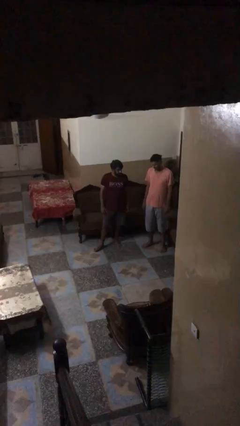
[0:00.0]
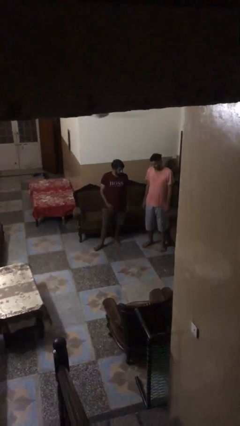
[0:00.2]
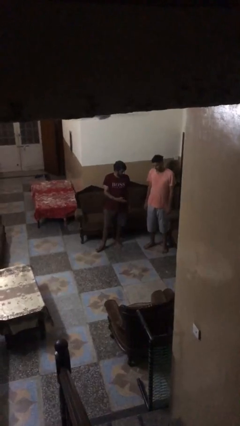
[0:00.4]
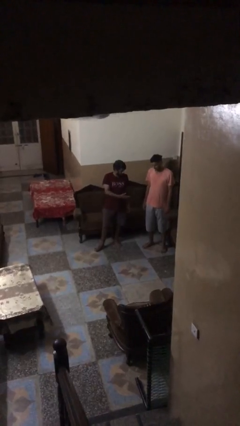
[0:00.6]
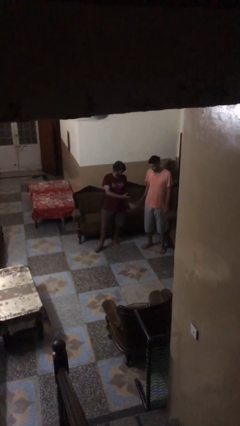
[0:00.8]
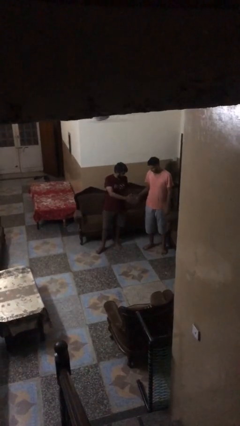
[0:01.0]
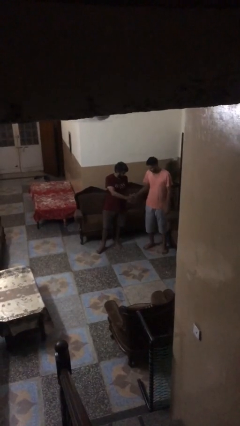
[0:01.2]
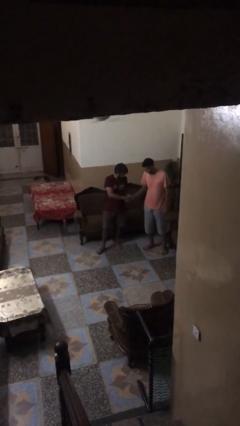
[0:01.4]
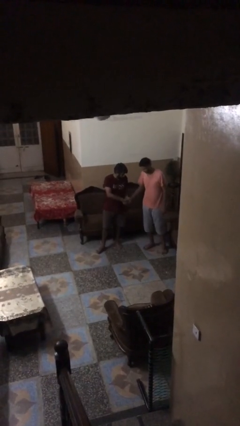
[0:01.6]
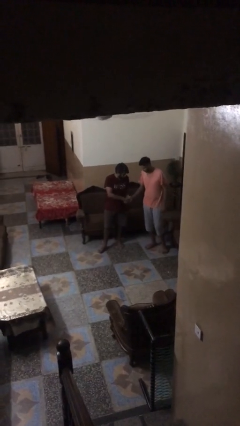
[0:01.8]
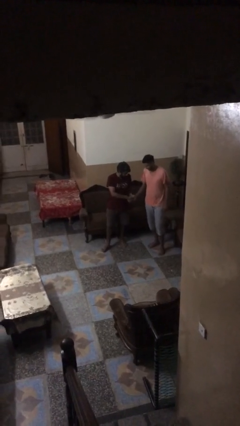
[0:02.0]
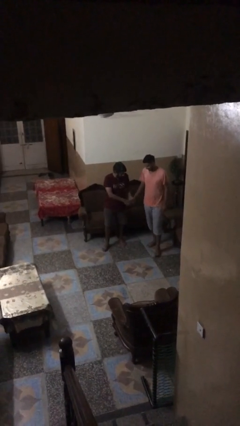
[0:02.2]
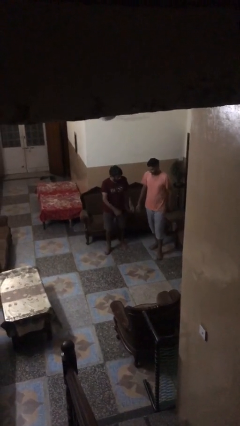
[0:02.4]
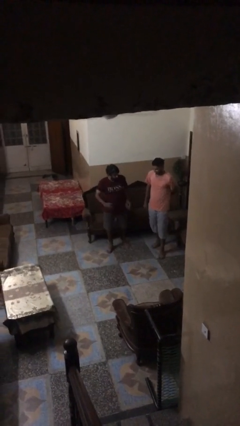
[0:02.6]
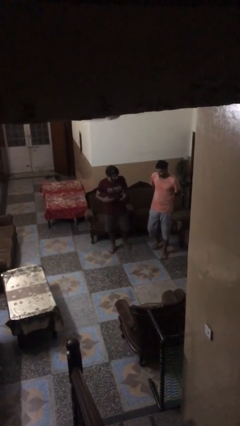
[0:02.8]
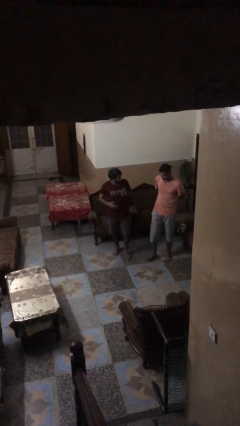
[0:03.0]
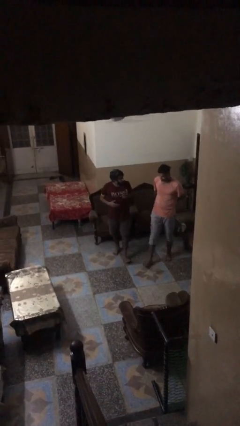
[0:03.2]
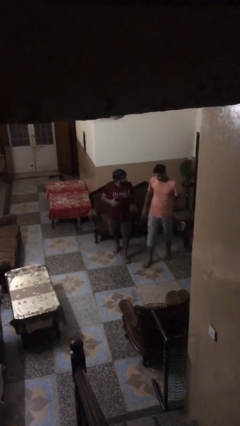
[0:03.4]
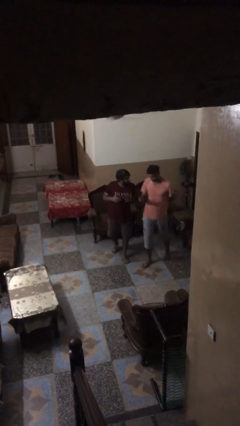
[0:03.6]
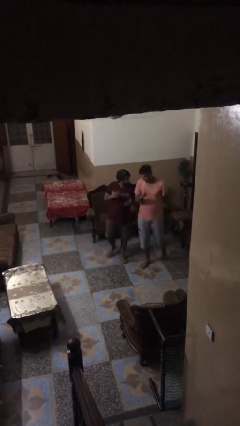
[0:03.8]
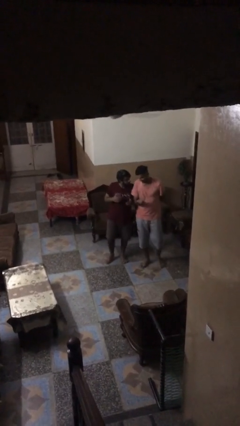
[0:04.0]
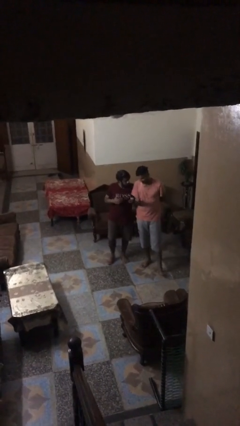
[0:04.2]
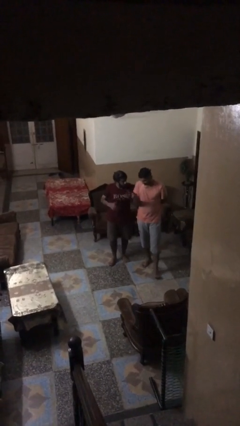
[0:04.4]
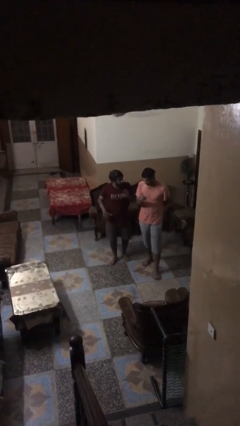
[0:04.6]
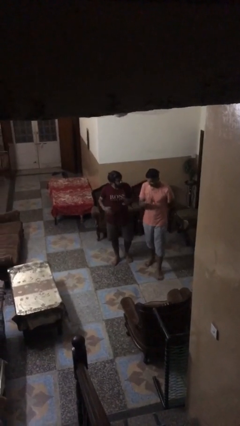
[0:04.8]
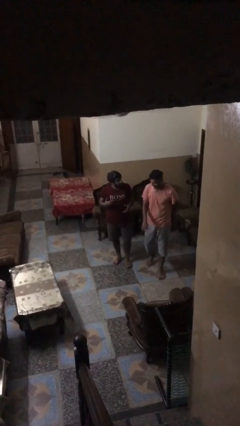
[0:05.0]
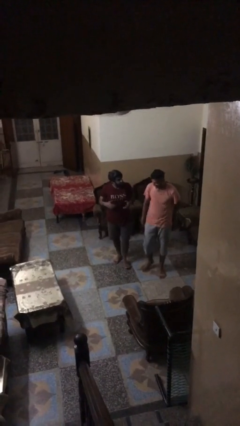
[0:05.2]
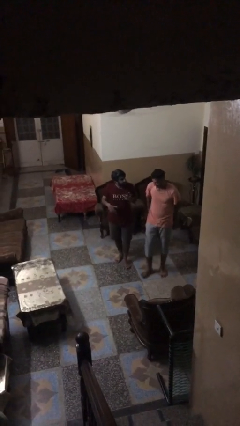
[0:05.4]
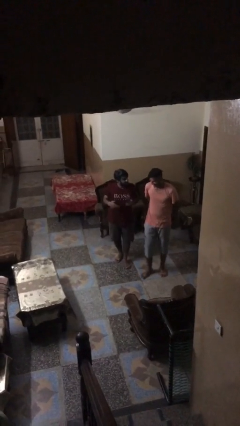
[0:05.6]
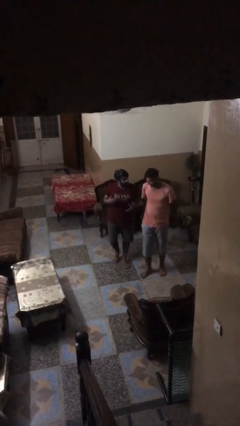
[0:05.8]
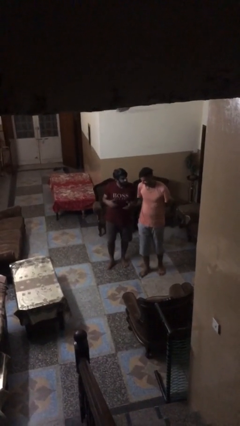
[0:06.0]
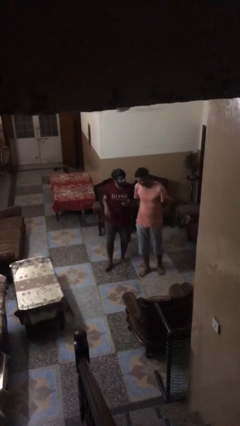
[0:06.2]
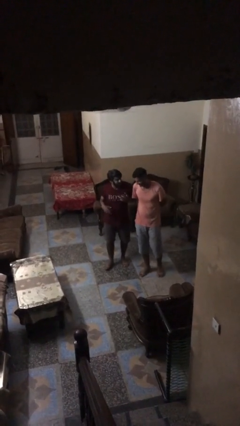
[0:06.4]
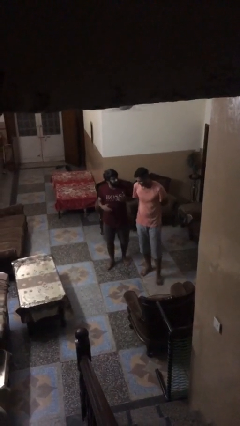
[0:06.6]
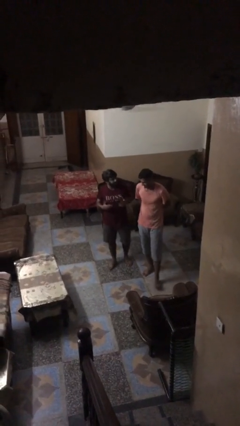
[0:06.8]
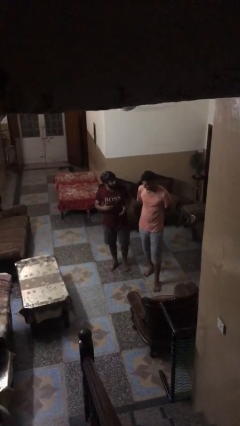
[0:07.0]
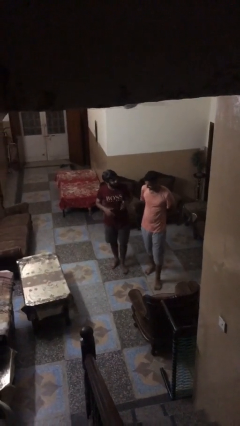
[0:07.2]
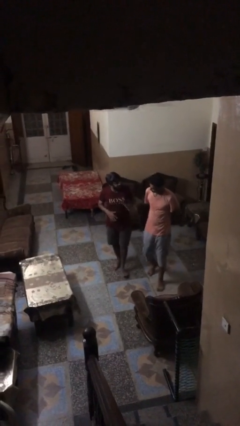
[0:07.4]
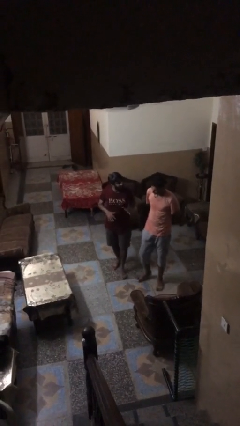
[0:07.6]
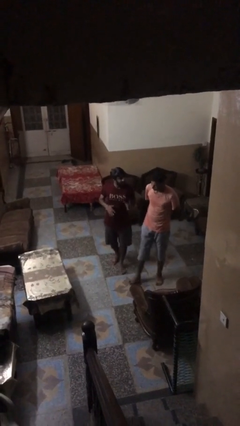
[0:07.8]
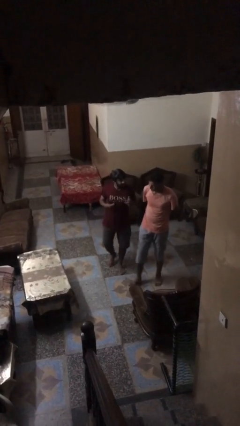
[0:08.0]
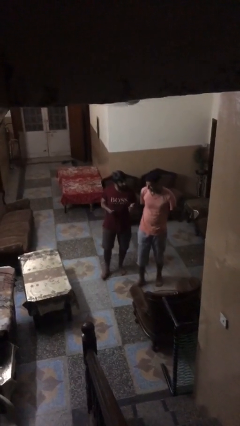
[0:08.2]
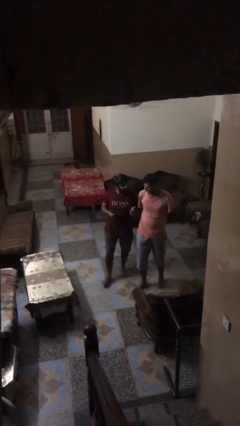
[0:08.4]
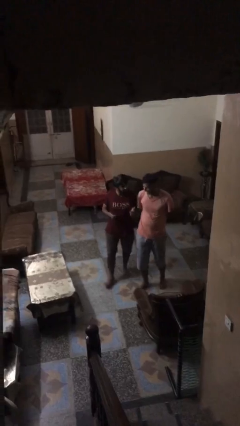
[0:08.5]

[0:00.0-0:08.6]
person shakes hand

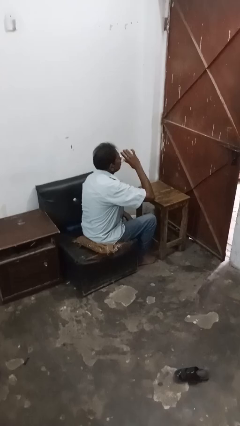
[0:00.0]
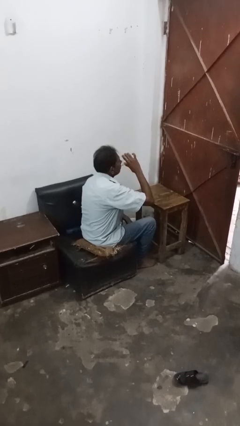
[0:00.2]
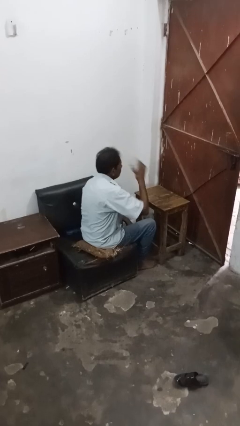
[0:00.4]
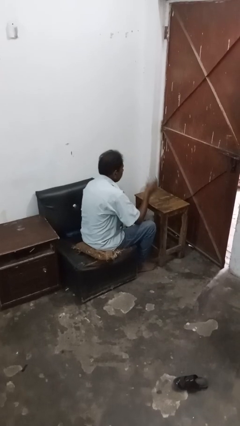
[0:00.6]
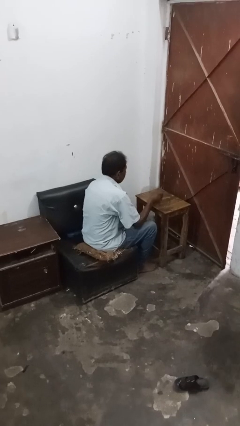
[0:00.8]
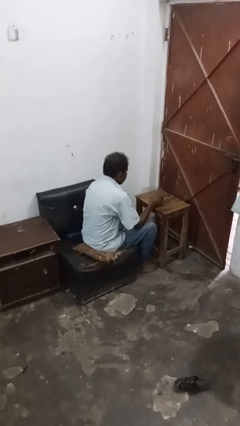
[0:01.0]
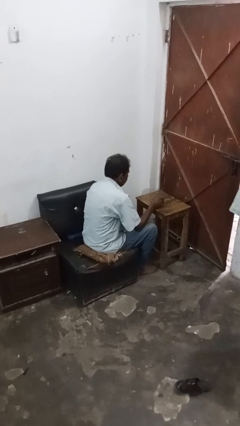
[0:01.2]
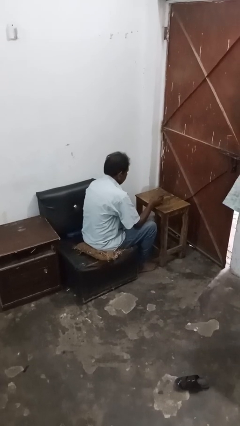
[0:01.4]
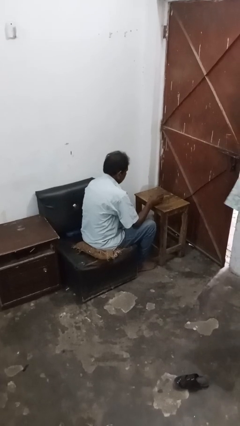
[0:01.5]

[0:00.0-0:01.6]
person puts down object on table

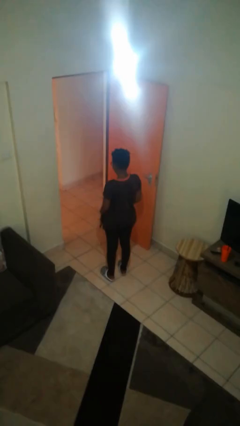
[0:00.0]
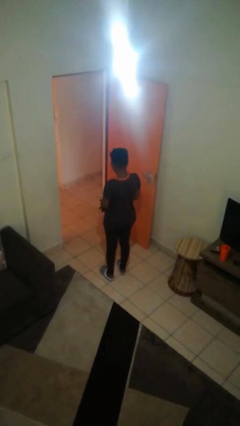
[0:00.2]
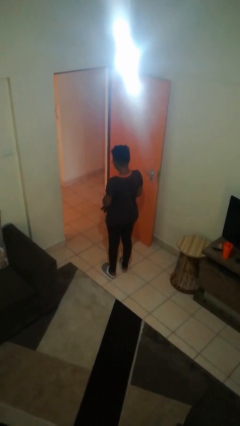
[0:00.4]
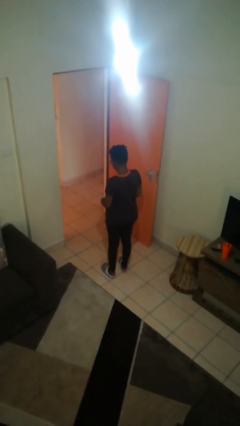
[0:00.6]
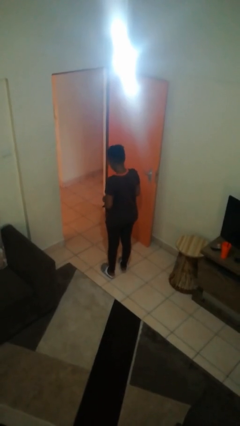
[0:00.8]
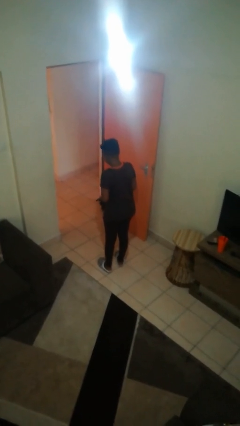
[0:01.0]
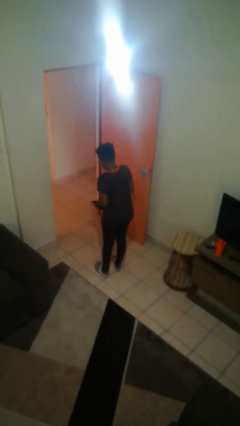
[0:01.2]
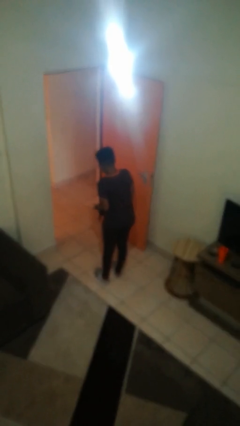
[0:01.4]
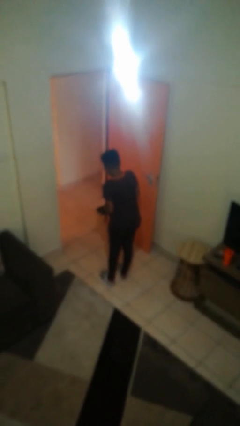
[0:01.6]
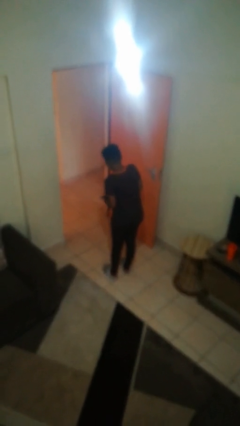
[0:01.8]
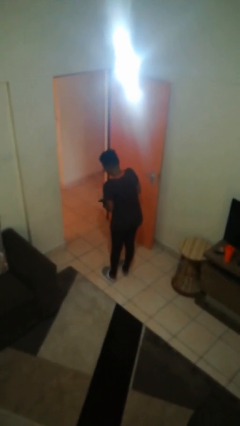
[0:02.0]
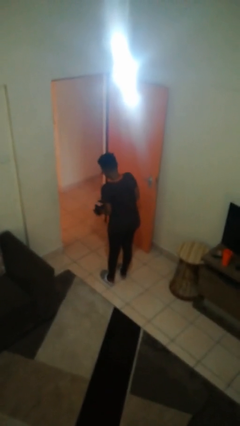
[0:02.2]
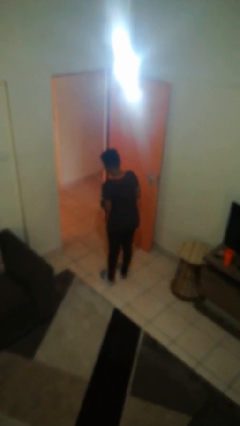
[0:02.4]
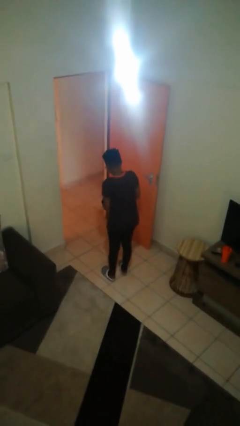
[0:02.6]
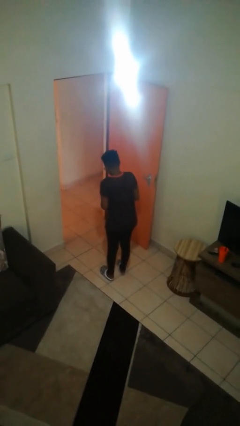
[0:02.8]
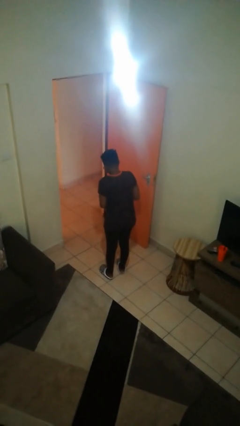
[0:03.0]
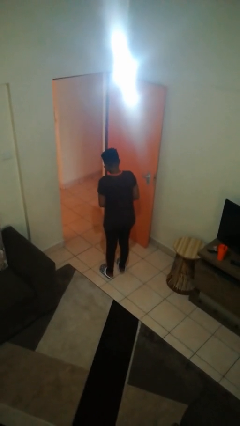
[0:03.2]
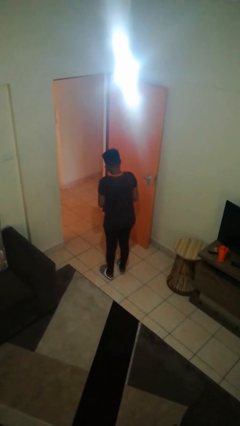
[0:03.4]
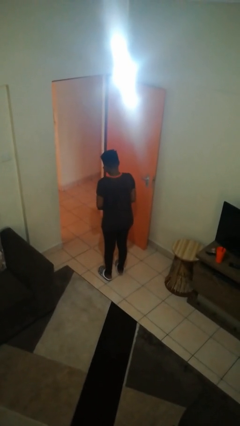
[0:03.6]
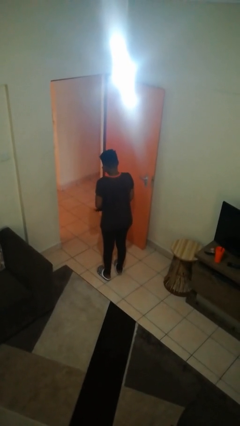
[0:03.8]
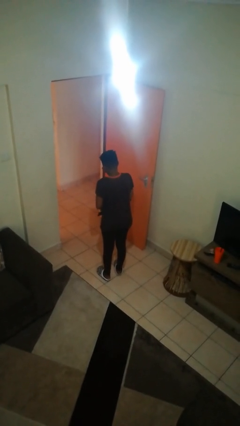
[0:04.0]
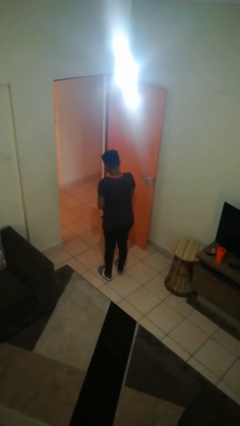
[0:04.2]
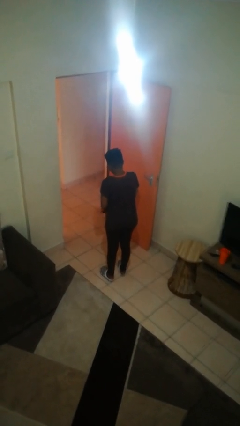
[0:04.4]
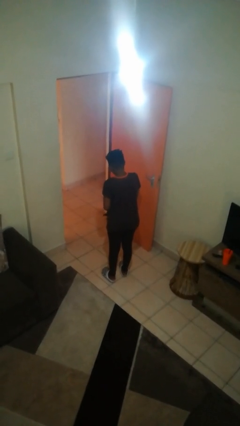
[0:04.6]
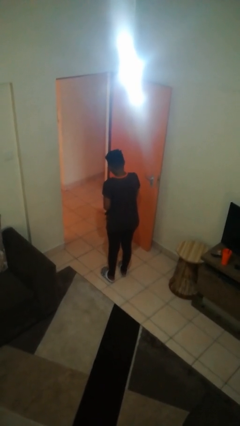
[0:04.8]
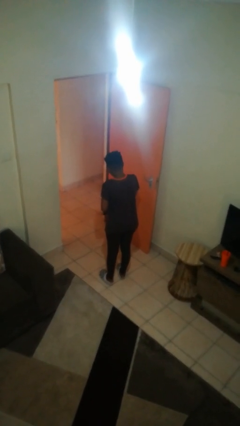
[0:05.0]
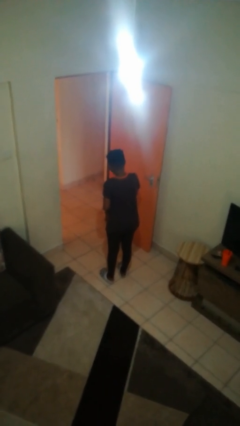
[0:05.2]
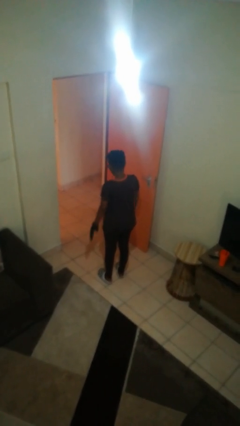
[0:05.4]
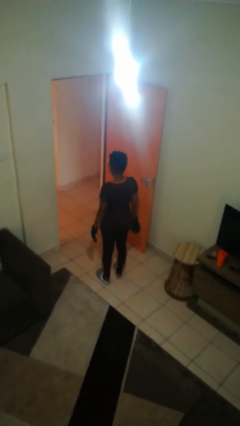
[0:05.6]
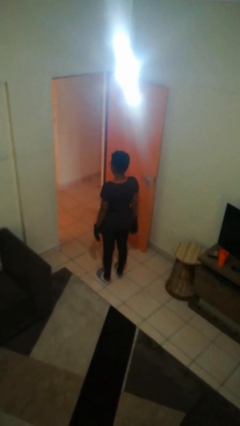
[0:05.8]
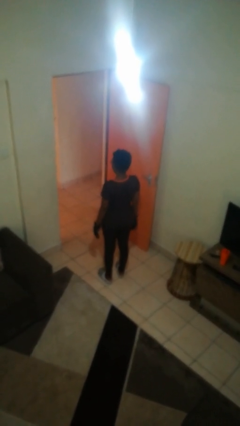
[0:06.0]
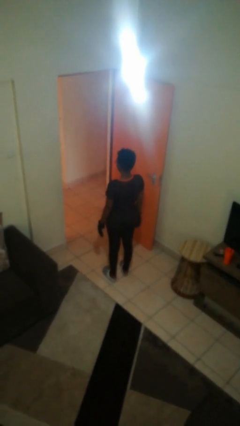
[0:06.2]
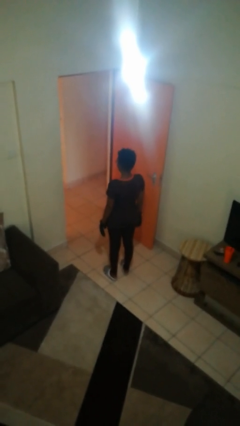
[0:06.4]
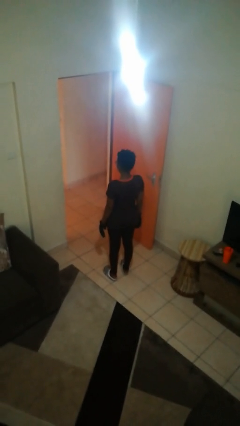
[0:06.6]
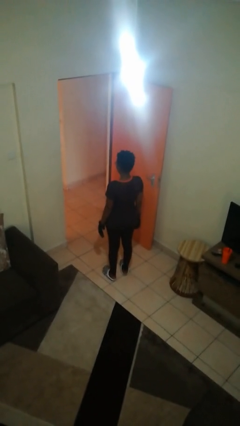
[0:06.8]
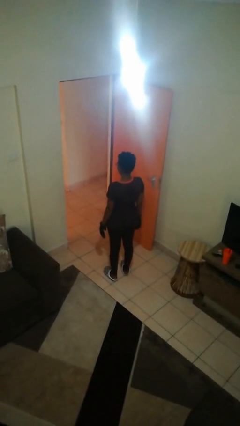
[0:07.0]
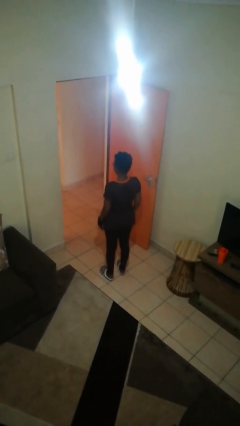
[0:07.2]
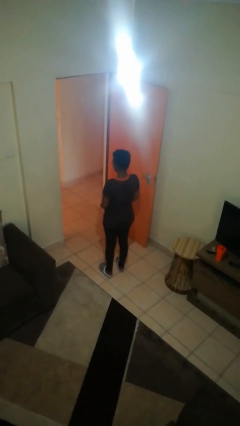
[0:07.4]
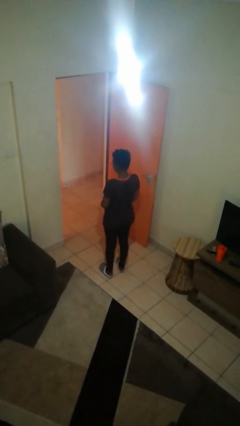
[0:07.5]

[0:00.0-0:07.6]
person puts on gloves
